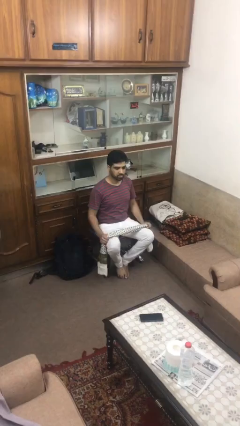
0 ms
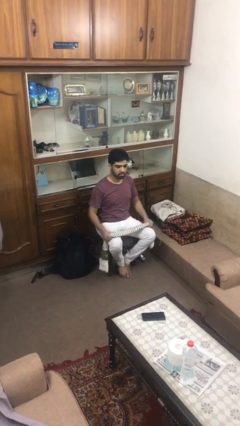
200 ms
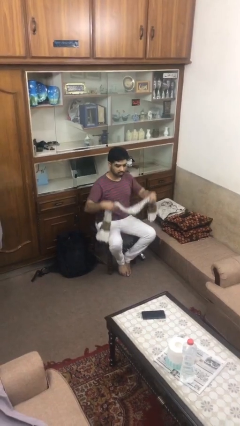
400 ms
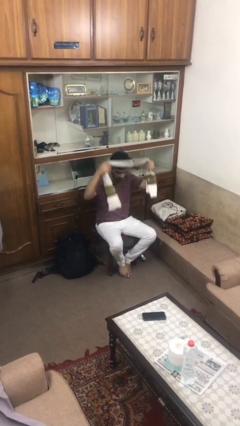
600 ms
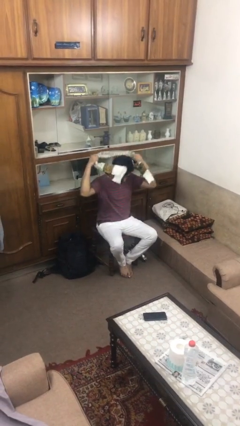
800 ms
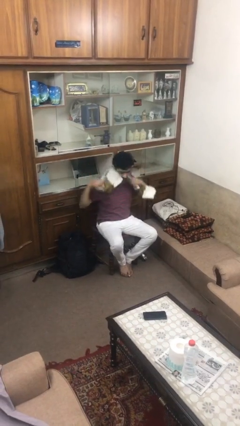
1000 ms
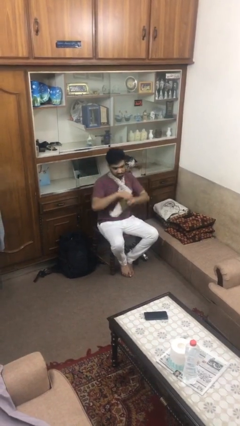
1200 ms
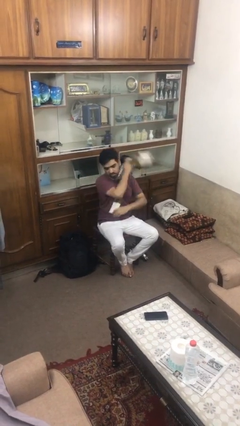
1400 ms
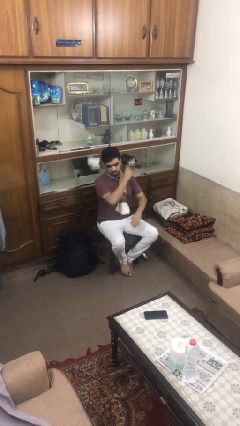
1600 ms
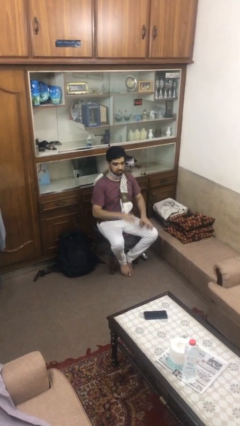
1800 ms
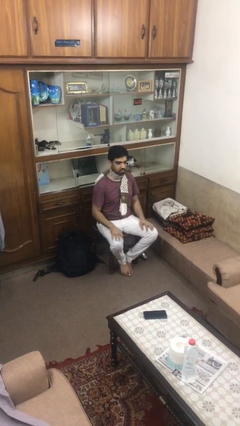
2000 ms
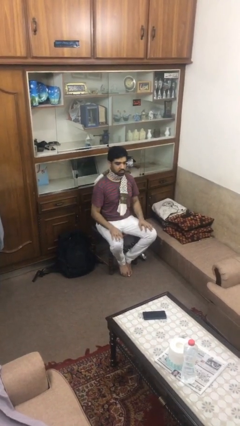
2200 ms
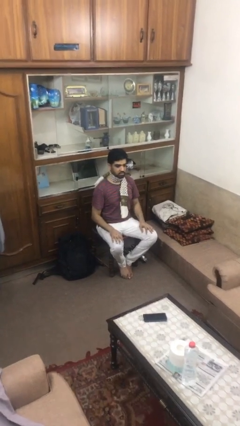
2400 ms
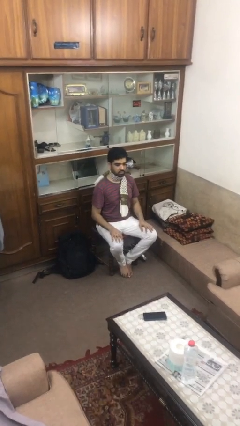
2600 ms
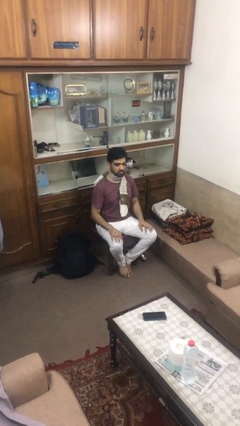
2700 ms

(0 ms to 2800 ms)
person puts on scarf

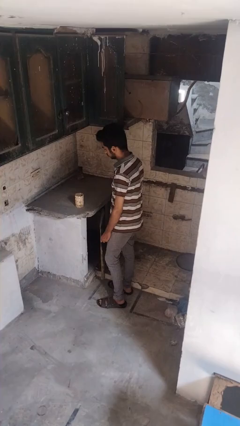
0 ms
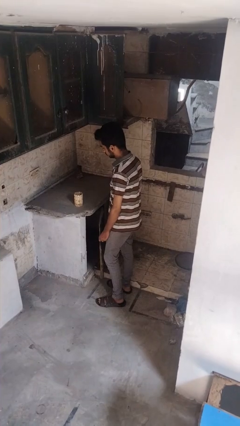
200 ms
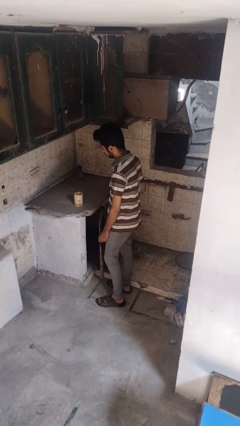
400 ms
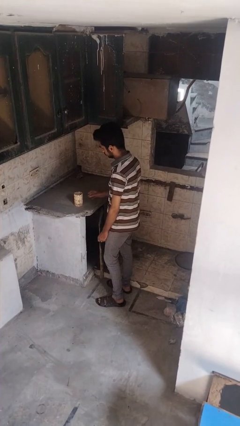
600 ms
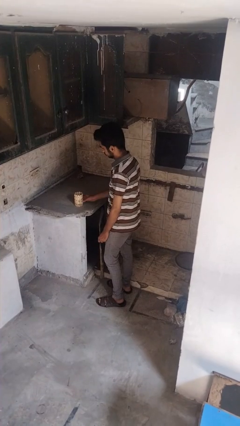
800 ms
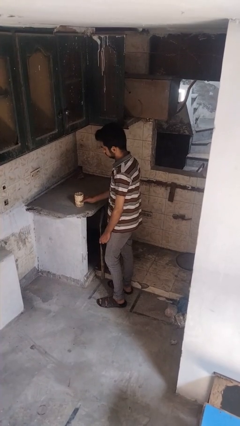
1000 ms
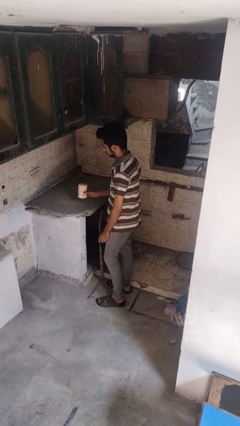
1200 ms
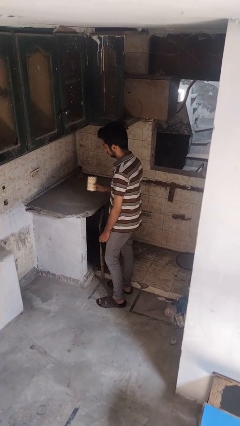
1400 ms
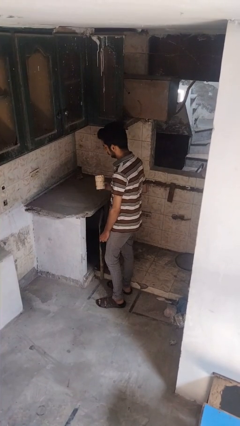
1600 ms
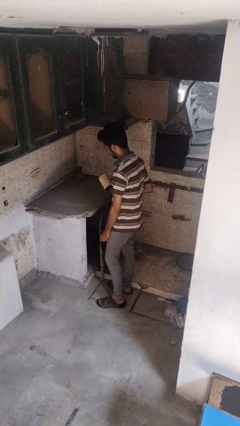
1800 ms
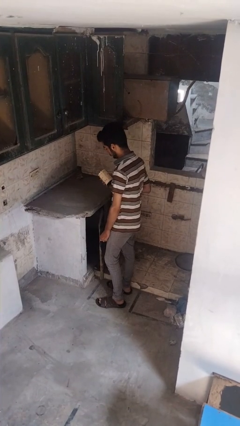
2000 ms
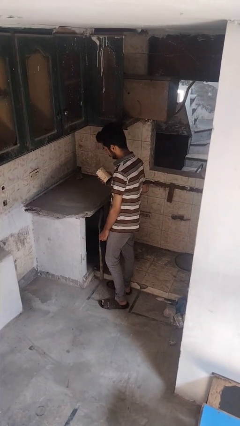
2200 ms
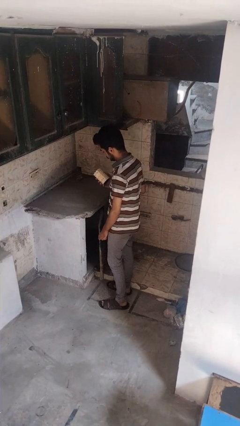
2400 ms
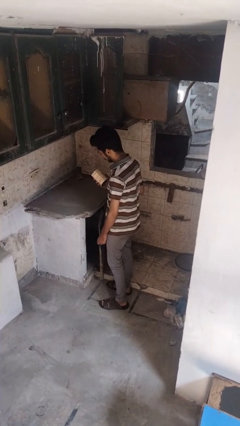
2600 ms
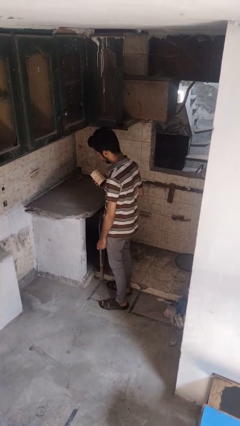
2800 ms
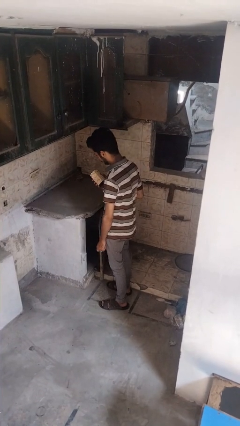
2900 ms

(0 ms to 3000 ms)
person picks up object from countertop

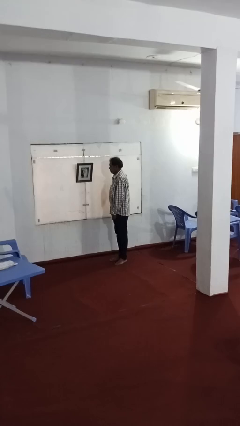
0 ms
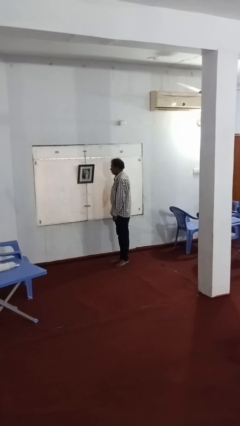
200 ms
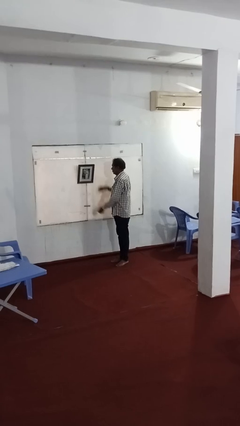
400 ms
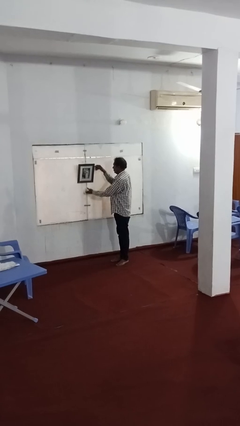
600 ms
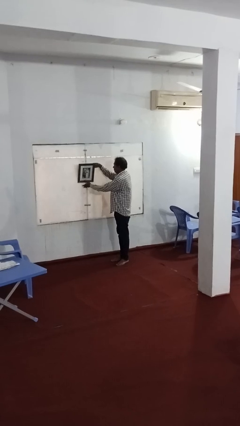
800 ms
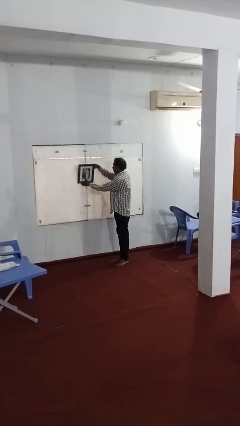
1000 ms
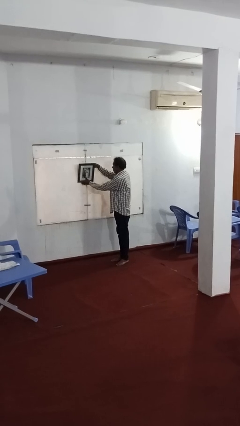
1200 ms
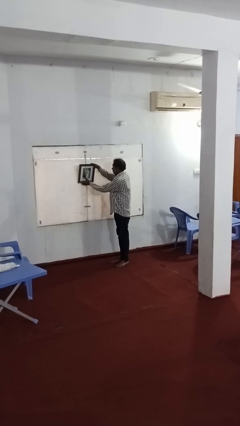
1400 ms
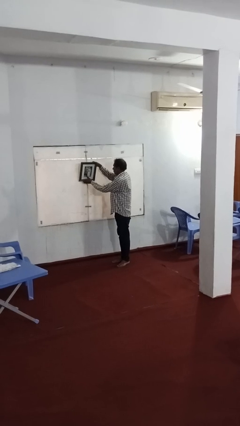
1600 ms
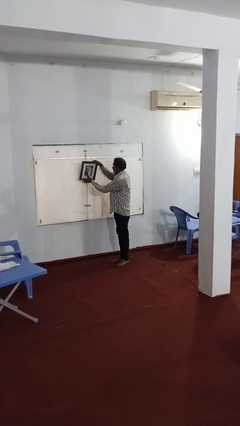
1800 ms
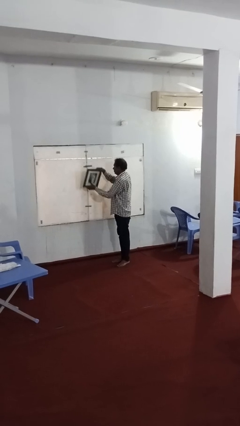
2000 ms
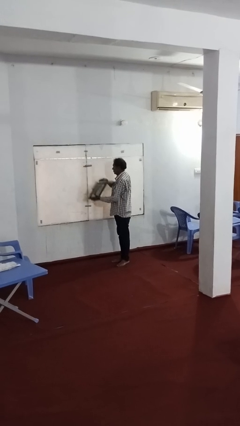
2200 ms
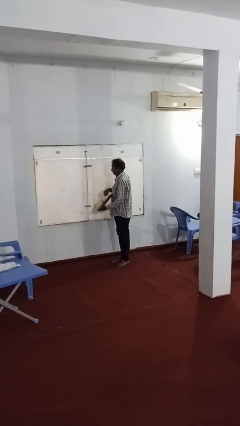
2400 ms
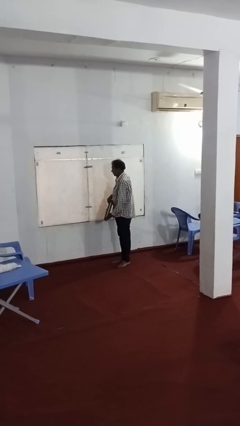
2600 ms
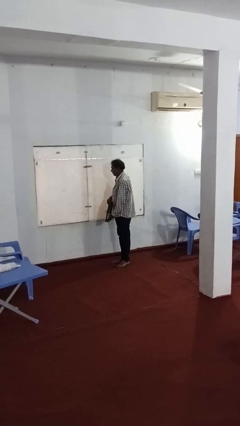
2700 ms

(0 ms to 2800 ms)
person takes down picture frame

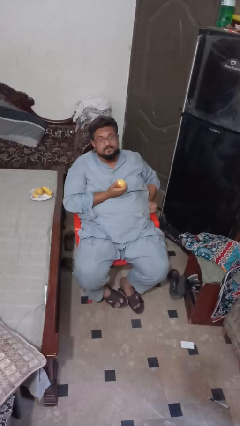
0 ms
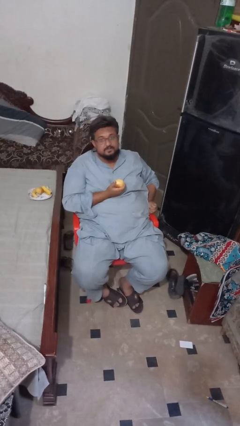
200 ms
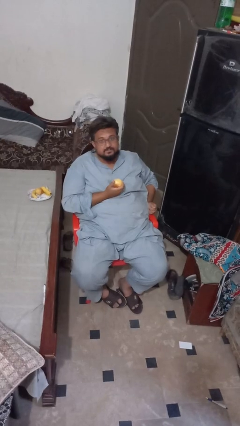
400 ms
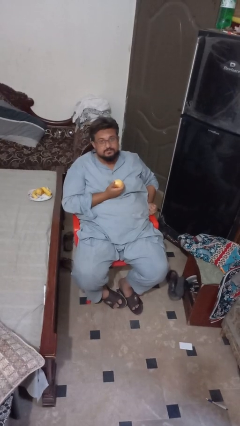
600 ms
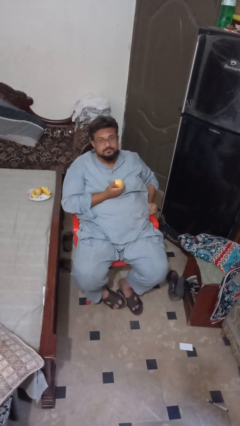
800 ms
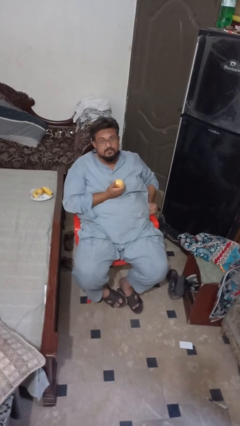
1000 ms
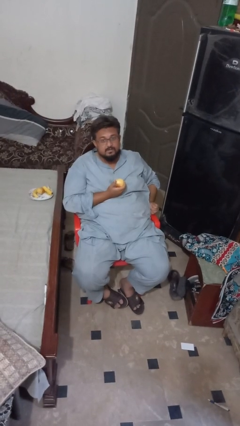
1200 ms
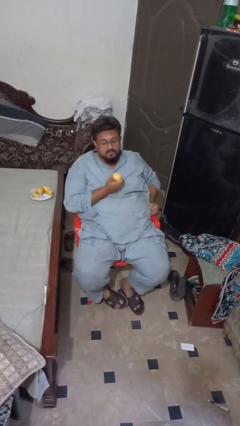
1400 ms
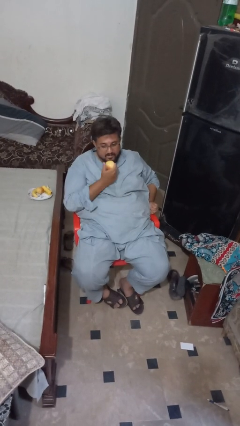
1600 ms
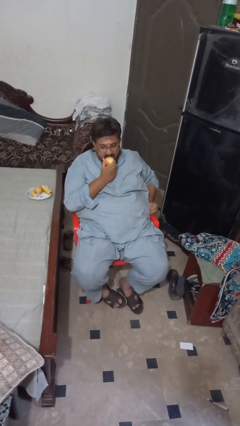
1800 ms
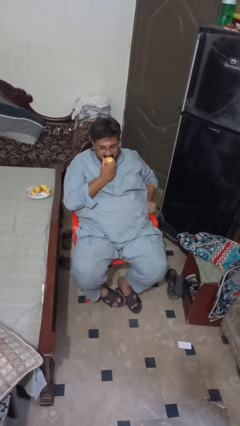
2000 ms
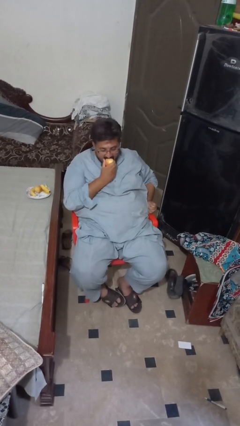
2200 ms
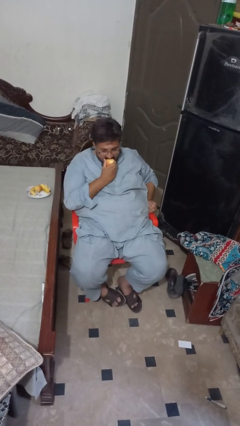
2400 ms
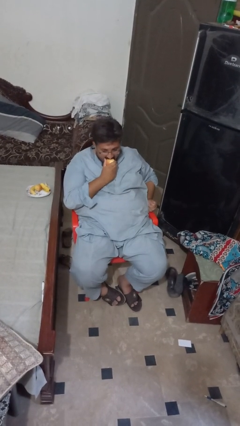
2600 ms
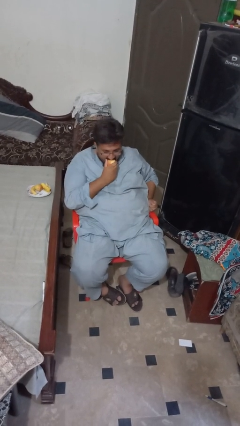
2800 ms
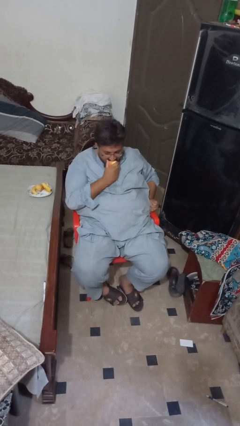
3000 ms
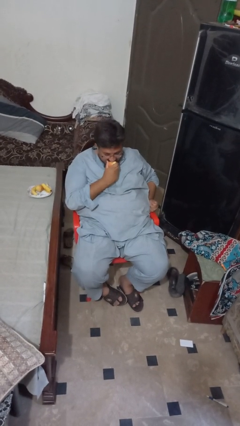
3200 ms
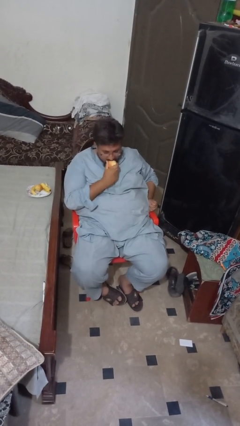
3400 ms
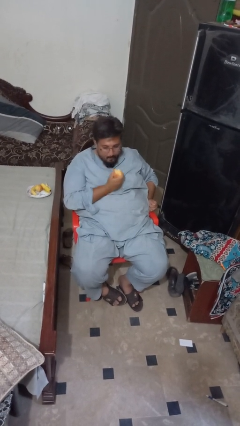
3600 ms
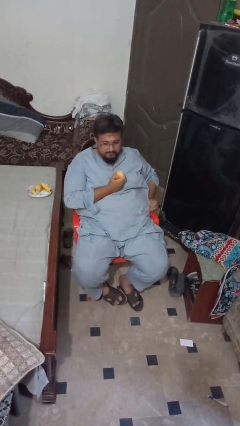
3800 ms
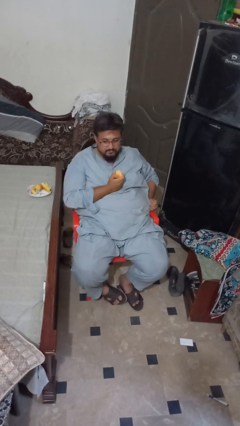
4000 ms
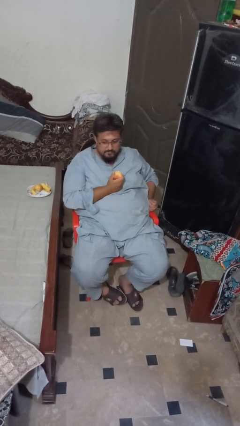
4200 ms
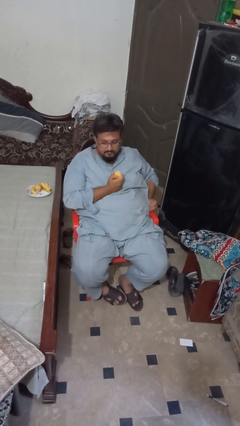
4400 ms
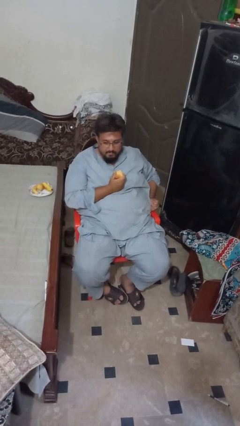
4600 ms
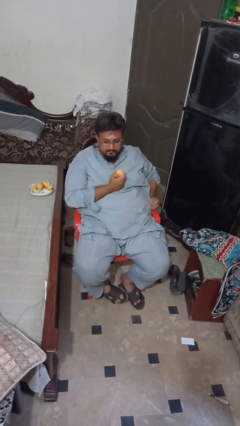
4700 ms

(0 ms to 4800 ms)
person eats apple

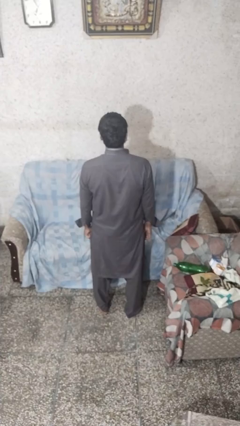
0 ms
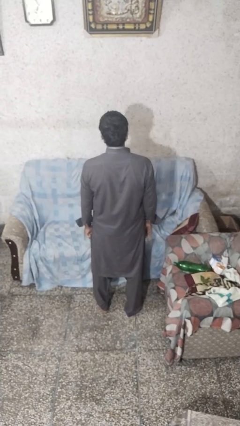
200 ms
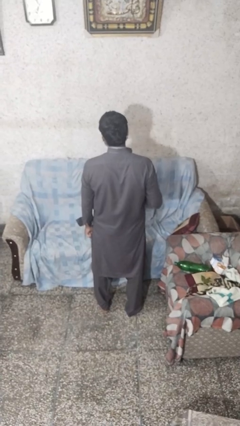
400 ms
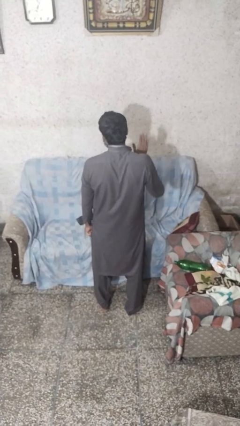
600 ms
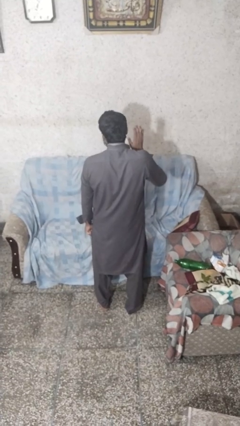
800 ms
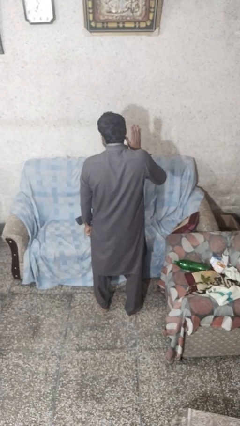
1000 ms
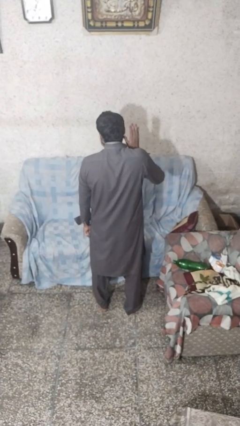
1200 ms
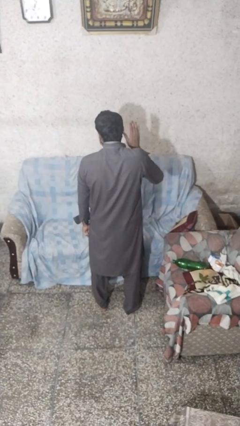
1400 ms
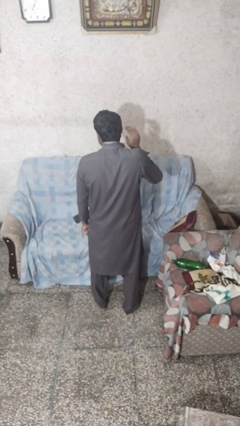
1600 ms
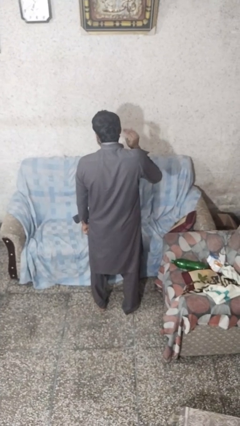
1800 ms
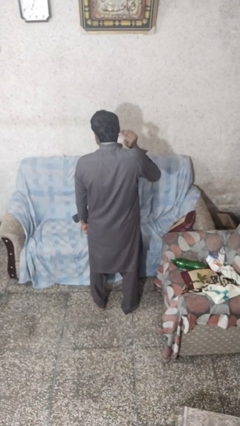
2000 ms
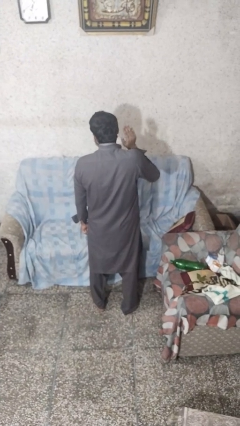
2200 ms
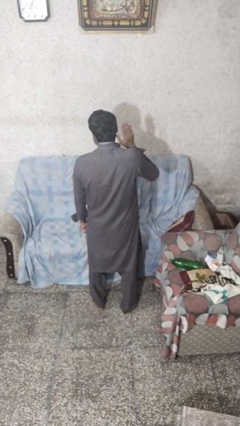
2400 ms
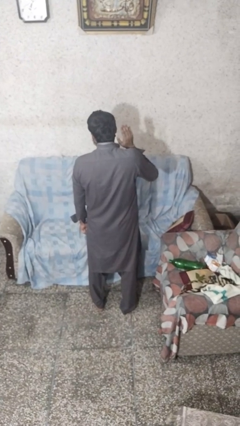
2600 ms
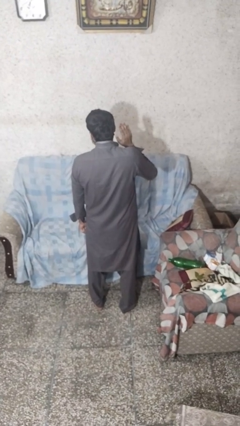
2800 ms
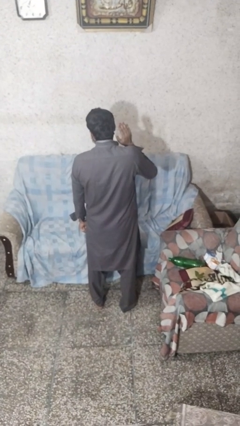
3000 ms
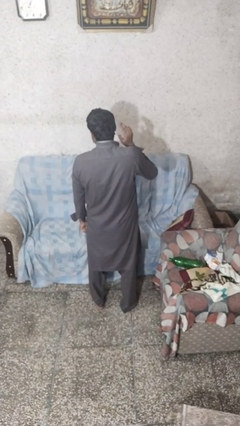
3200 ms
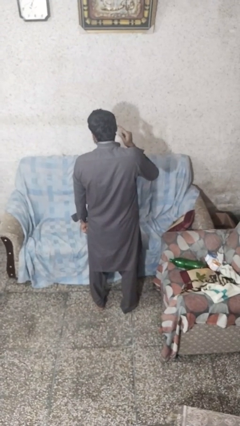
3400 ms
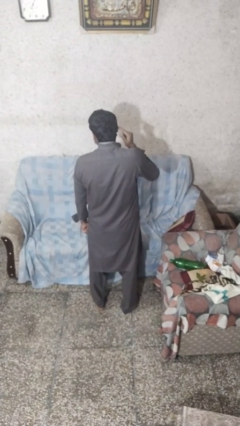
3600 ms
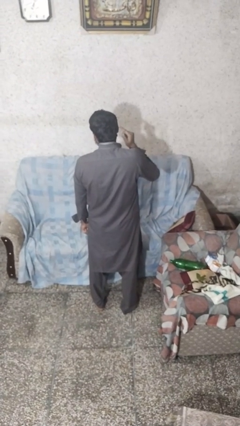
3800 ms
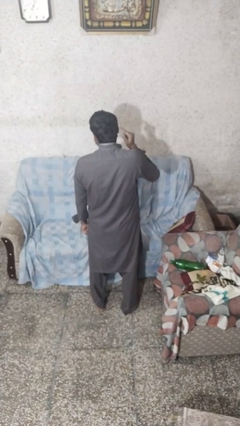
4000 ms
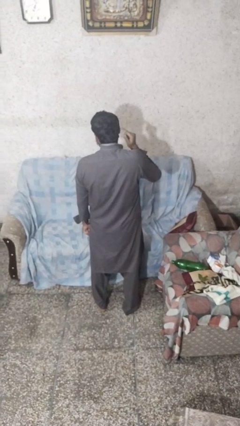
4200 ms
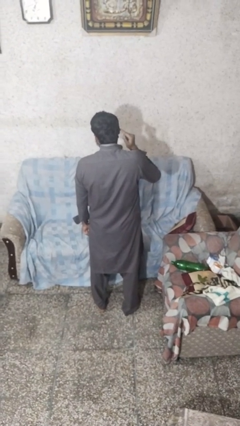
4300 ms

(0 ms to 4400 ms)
person gestures listen closely
